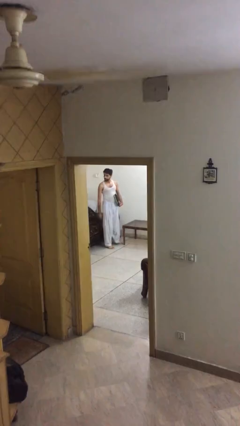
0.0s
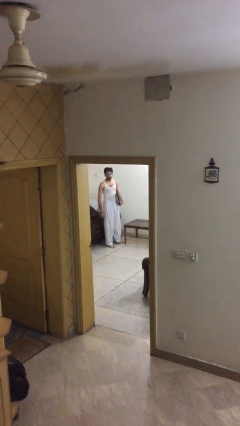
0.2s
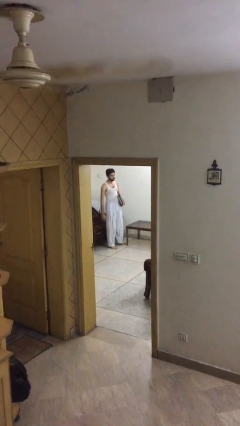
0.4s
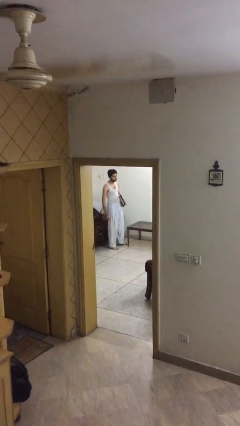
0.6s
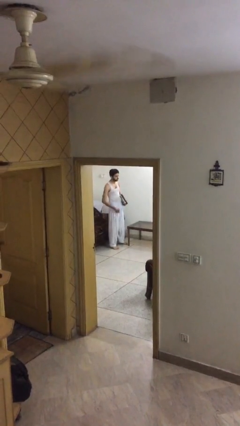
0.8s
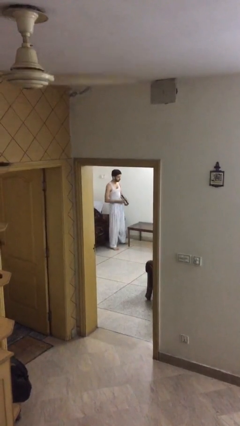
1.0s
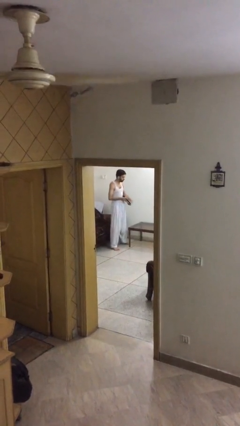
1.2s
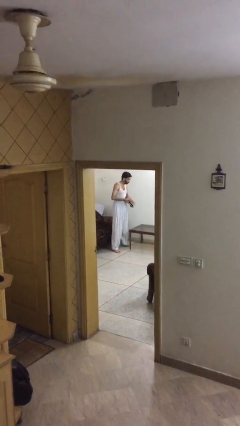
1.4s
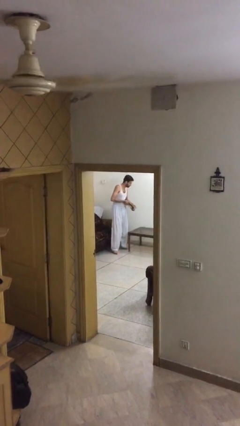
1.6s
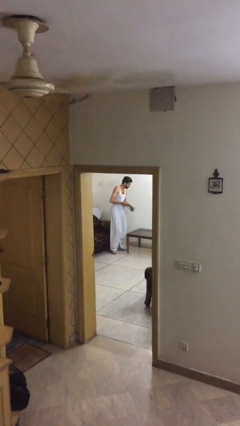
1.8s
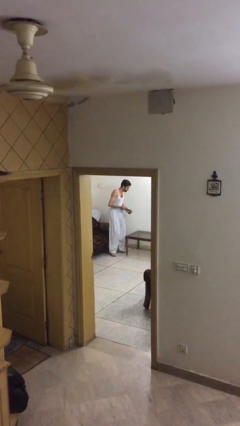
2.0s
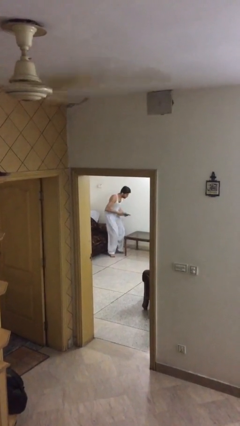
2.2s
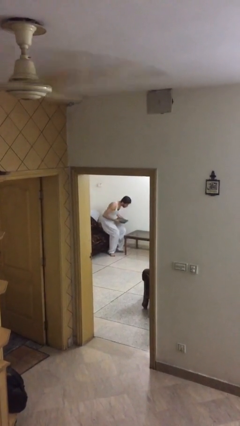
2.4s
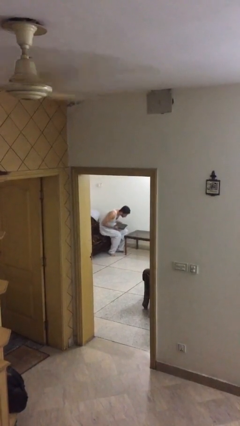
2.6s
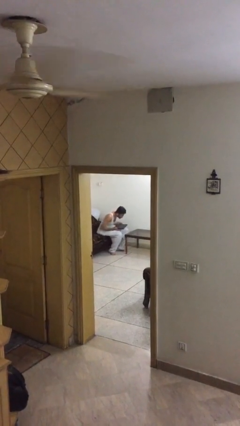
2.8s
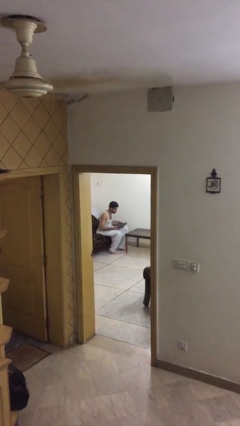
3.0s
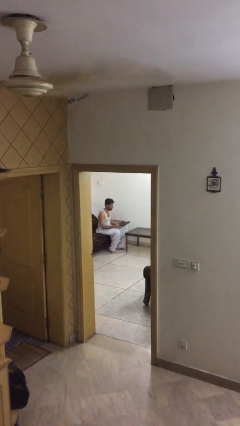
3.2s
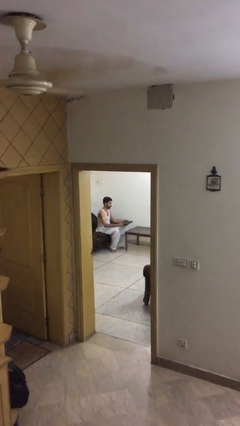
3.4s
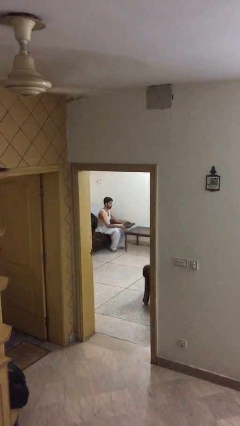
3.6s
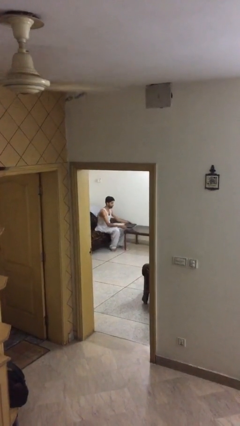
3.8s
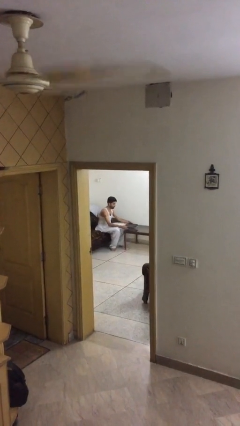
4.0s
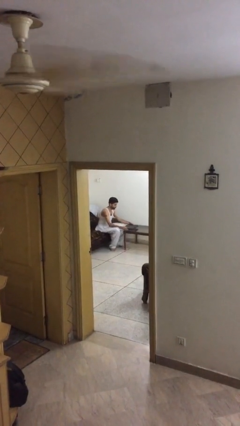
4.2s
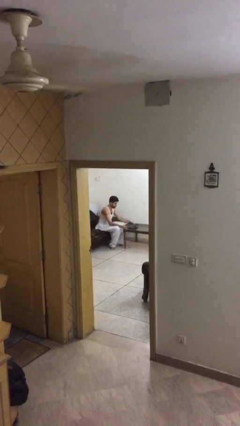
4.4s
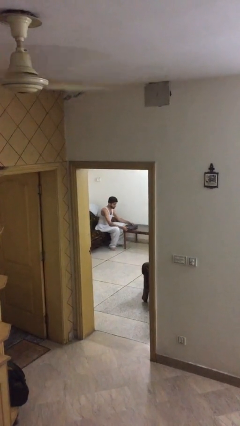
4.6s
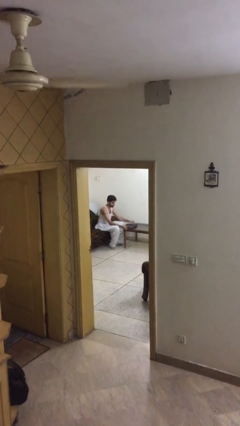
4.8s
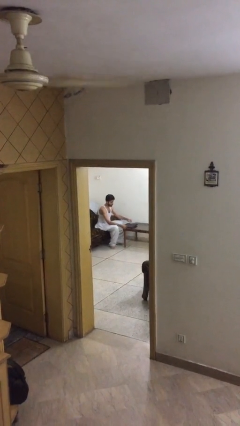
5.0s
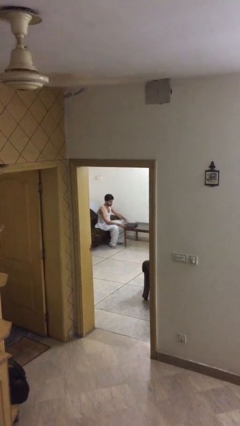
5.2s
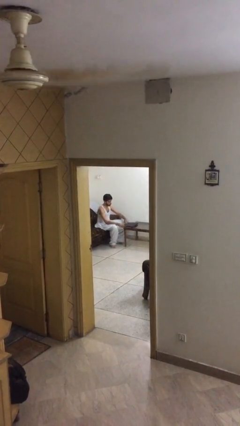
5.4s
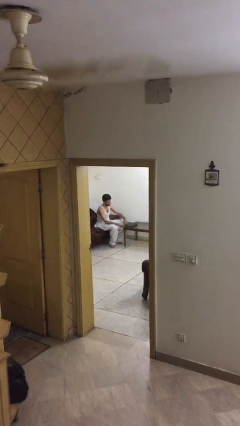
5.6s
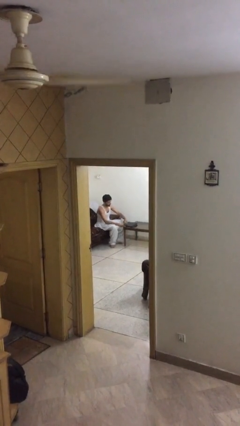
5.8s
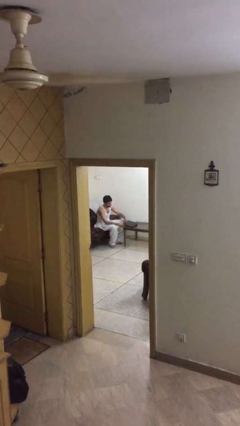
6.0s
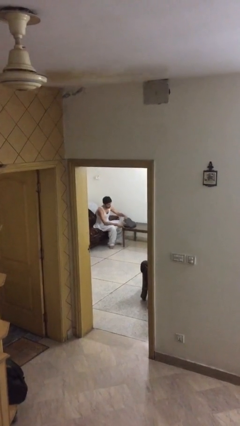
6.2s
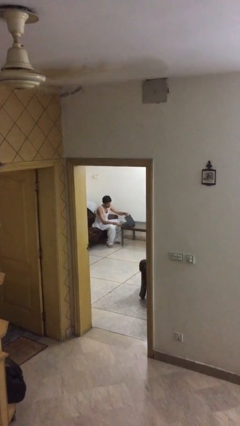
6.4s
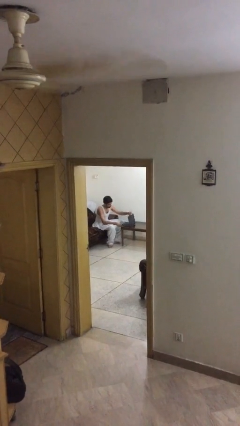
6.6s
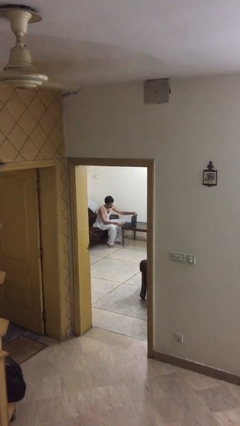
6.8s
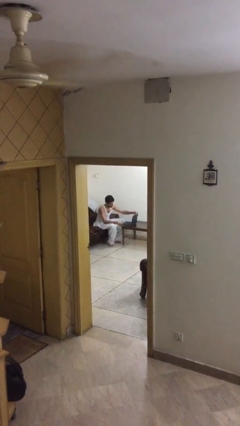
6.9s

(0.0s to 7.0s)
person sits down

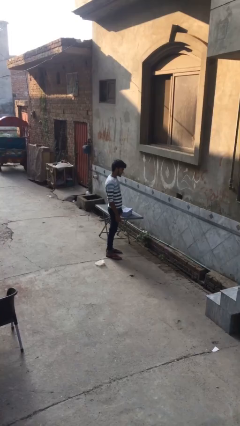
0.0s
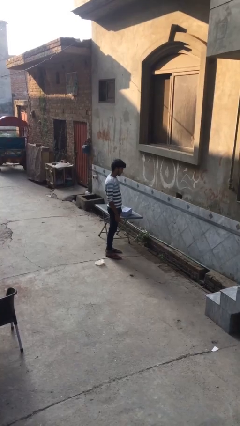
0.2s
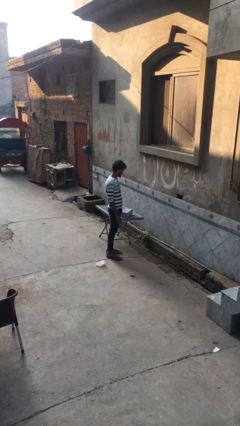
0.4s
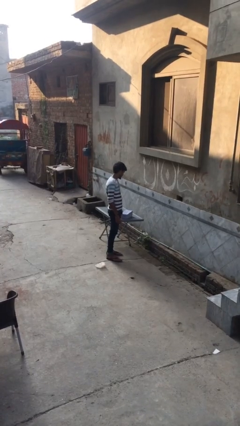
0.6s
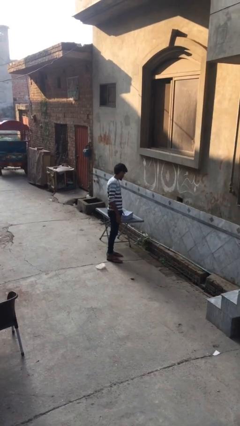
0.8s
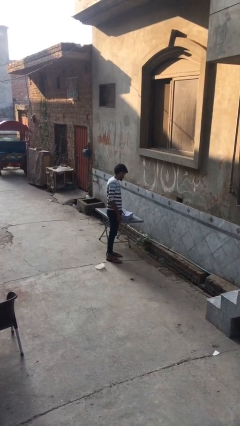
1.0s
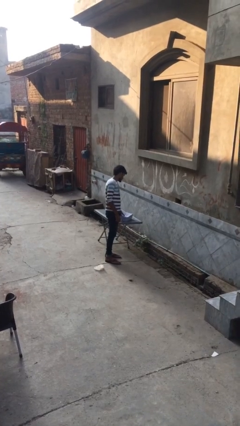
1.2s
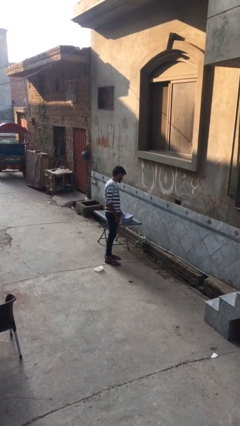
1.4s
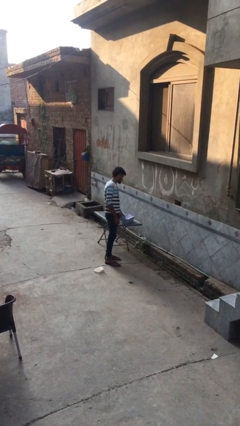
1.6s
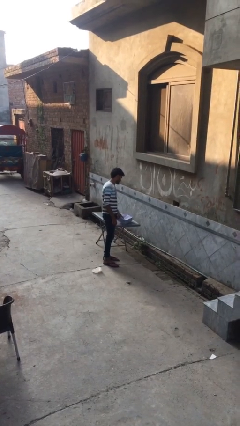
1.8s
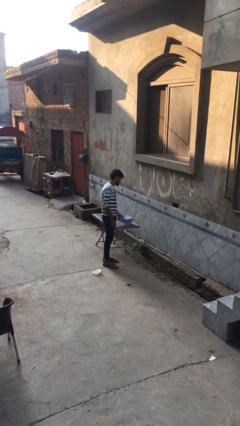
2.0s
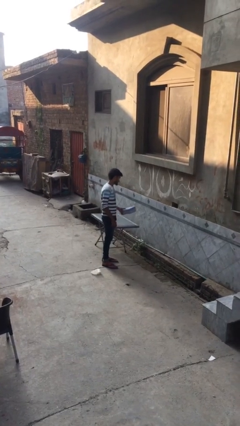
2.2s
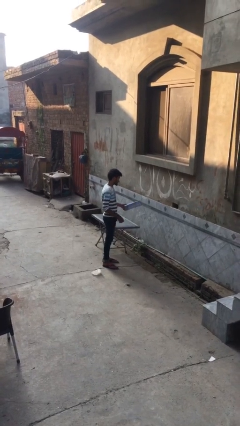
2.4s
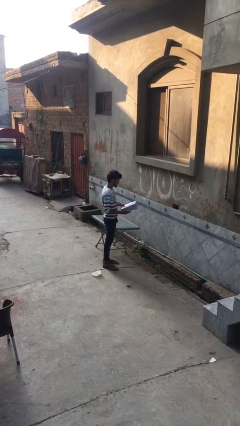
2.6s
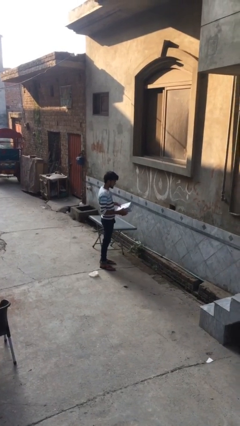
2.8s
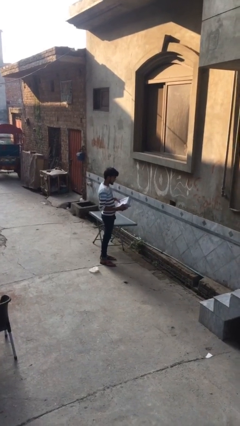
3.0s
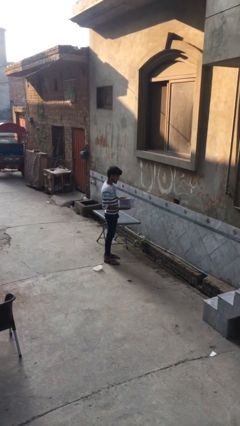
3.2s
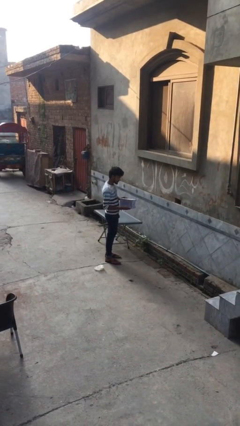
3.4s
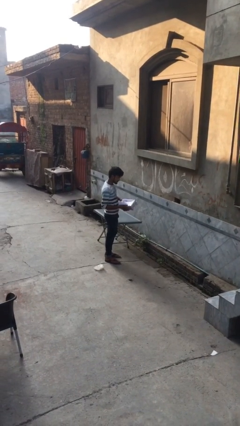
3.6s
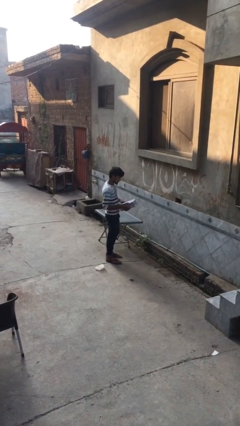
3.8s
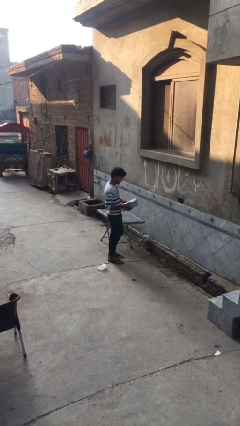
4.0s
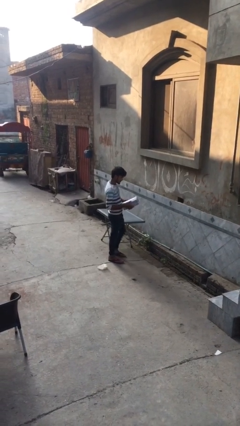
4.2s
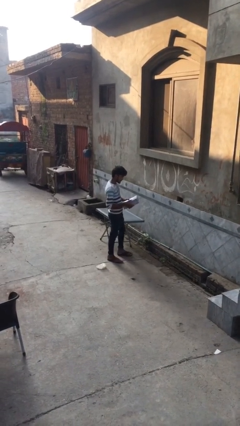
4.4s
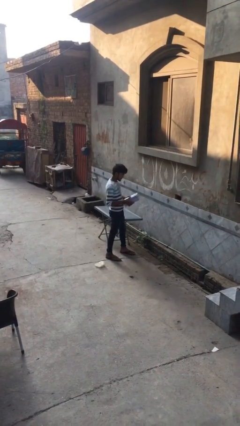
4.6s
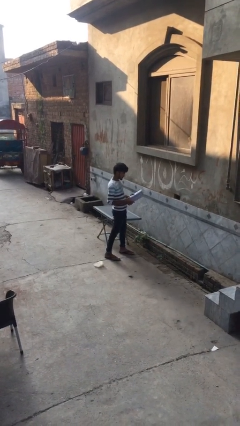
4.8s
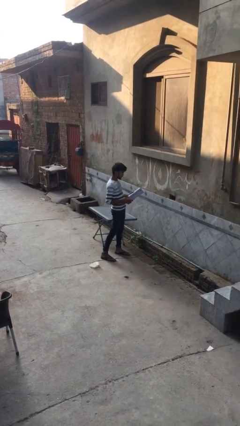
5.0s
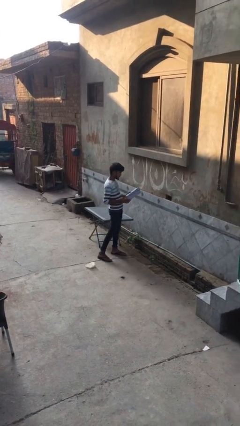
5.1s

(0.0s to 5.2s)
person picks up object from table

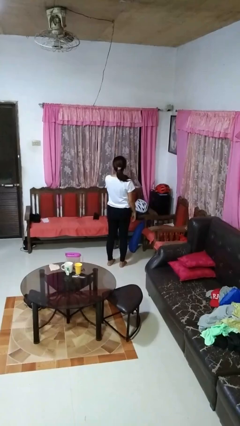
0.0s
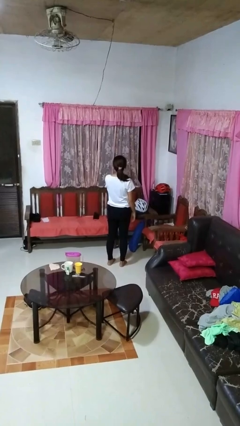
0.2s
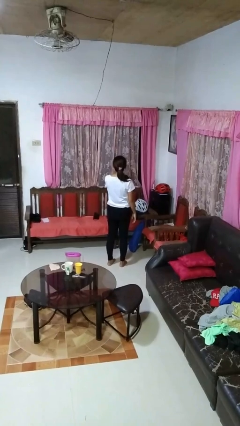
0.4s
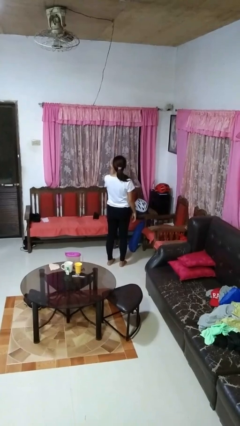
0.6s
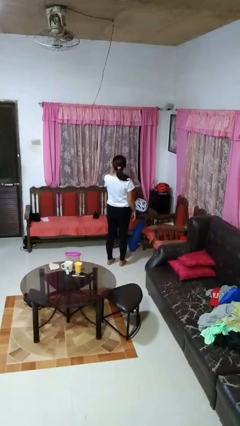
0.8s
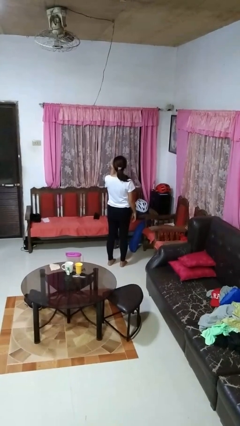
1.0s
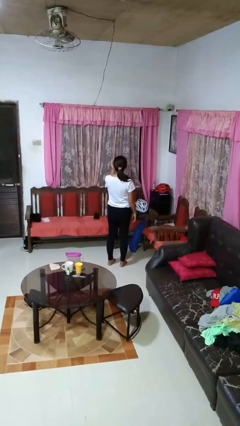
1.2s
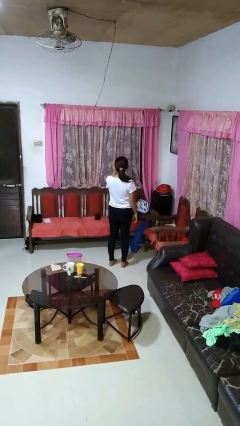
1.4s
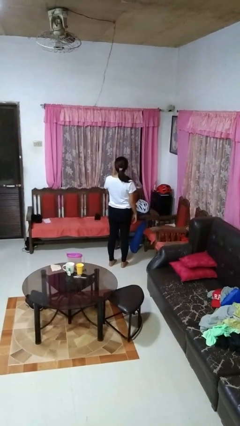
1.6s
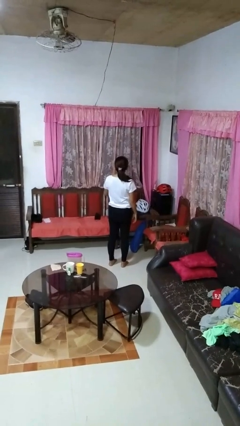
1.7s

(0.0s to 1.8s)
person gestures blow kiss

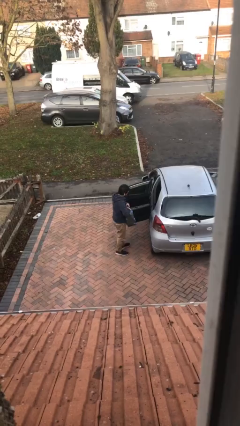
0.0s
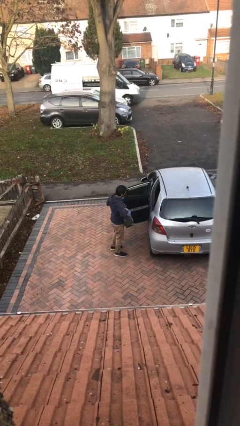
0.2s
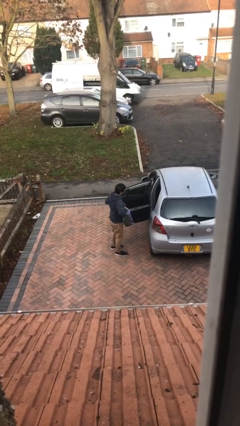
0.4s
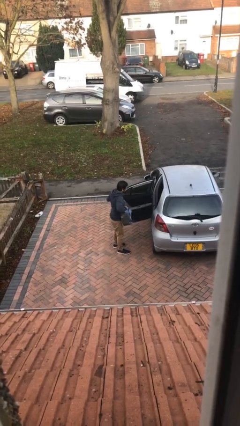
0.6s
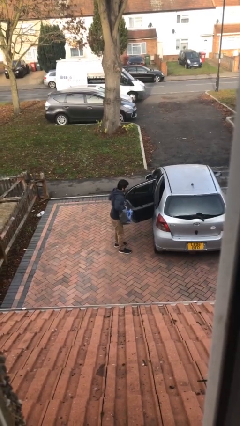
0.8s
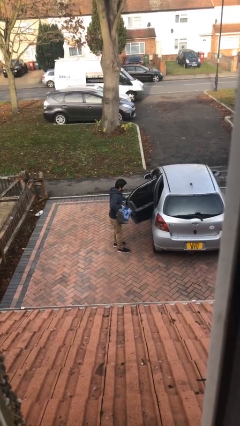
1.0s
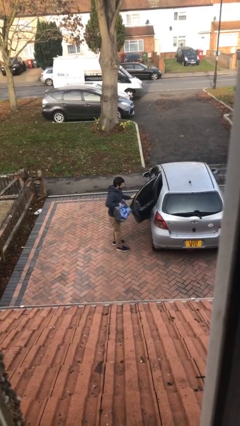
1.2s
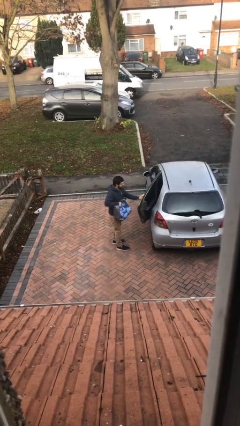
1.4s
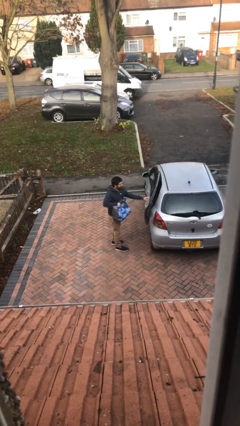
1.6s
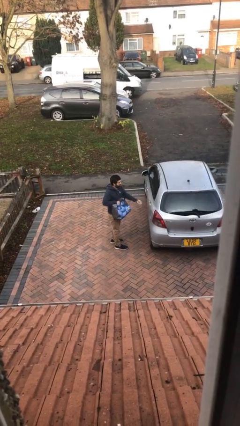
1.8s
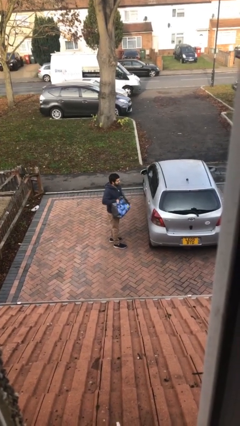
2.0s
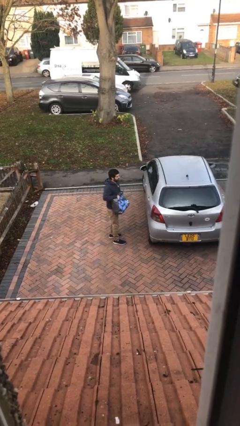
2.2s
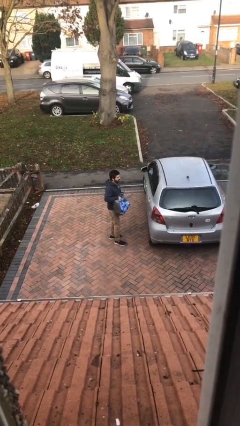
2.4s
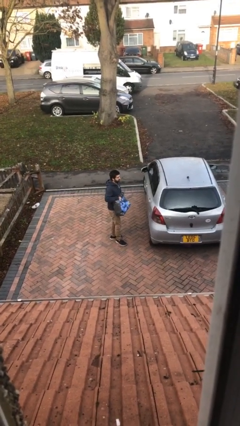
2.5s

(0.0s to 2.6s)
person closes car door

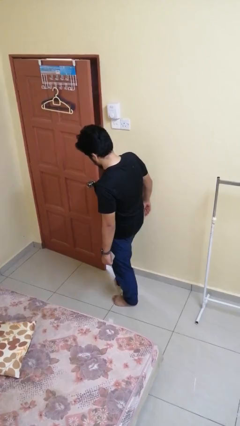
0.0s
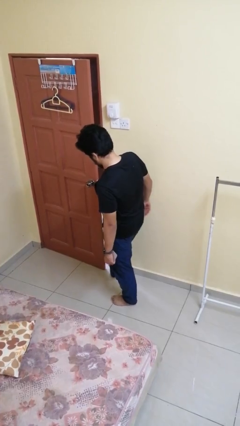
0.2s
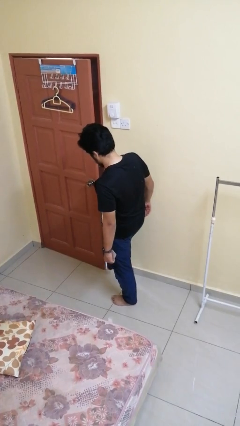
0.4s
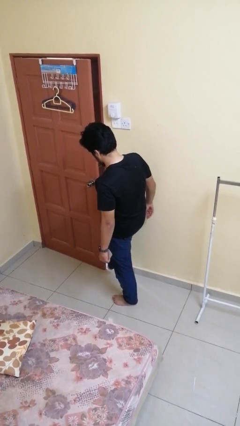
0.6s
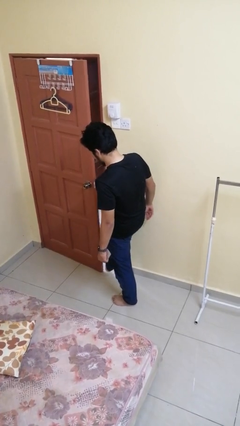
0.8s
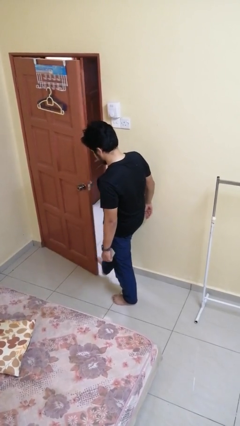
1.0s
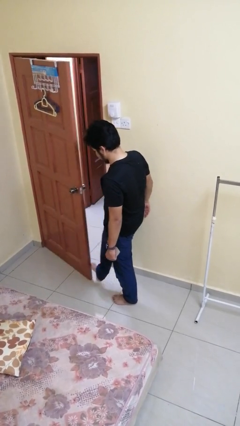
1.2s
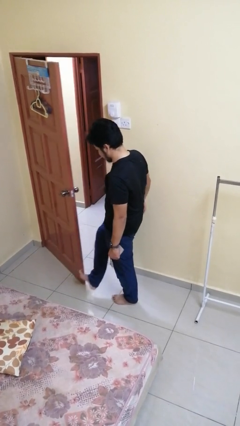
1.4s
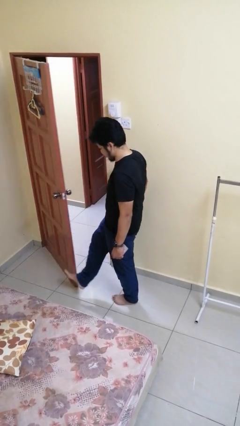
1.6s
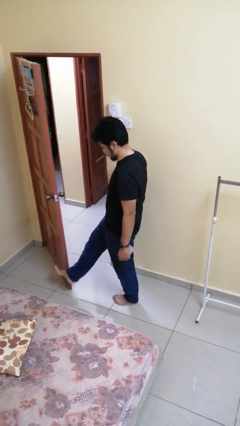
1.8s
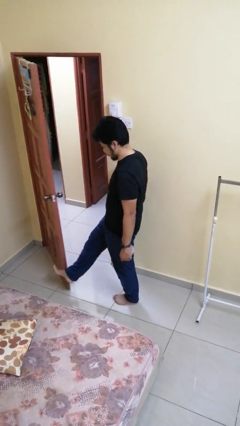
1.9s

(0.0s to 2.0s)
person opens facility door
